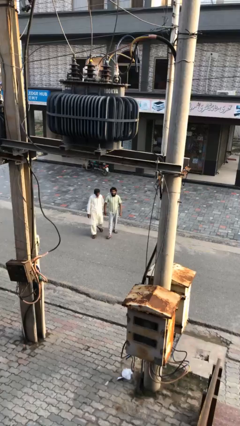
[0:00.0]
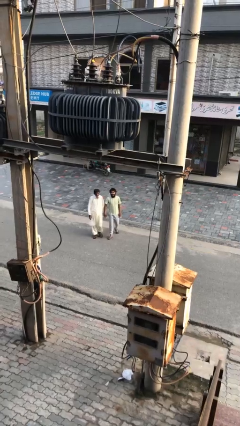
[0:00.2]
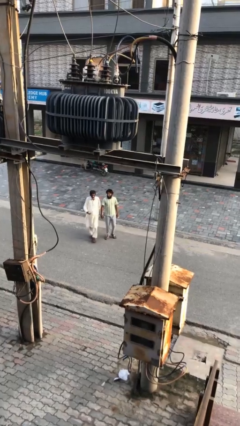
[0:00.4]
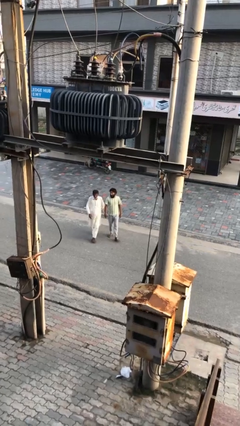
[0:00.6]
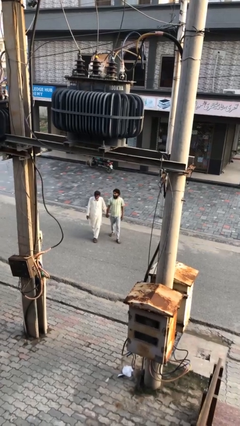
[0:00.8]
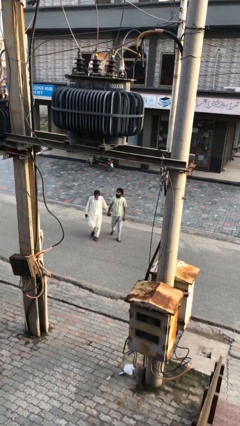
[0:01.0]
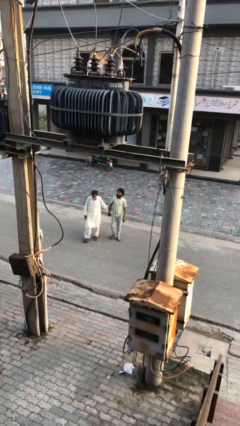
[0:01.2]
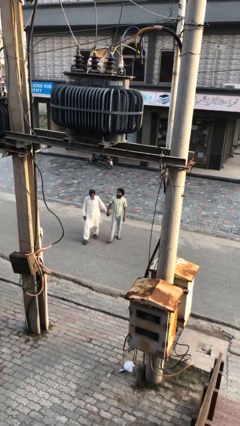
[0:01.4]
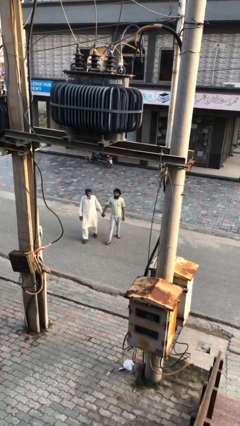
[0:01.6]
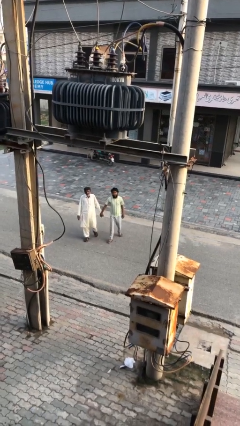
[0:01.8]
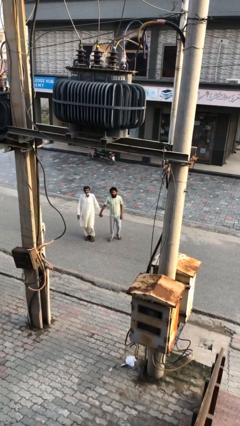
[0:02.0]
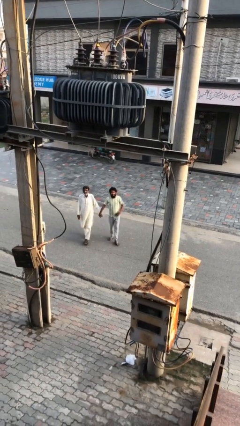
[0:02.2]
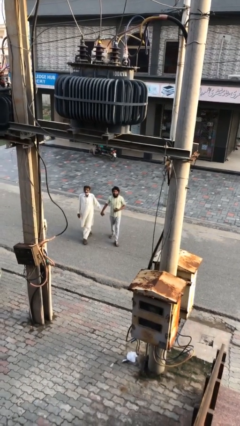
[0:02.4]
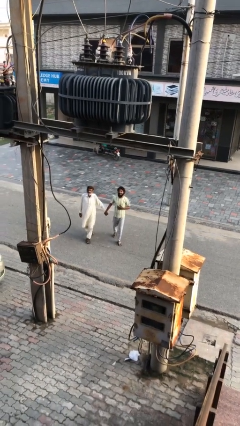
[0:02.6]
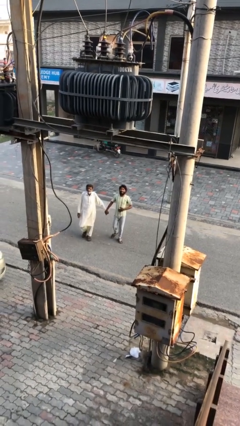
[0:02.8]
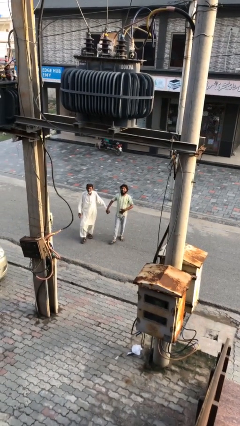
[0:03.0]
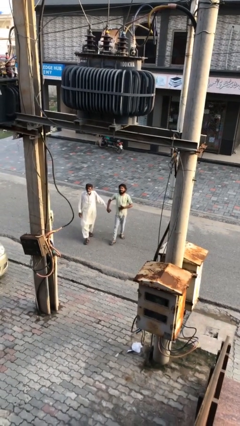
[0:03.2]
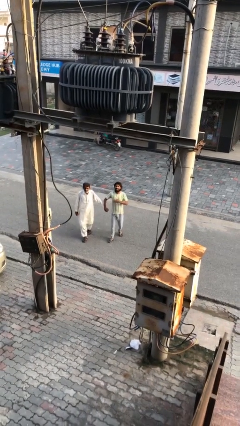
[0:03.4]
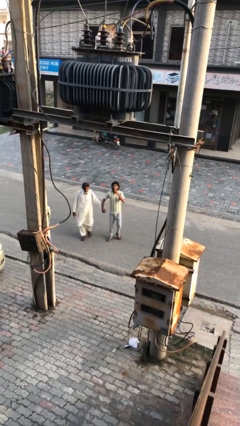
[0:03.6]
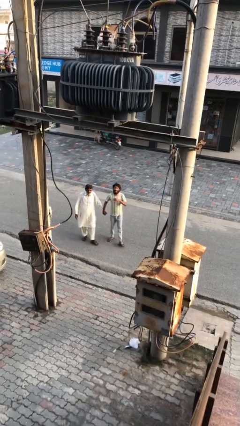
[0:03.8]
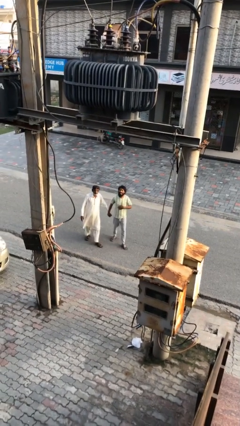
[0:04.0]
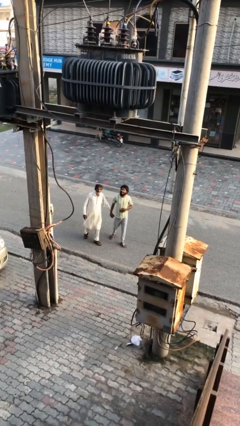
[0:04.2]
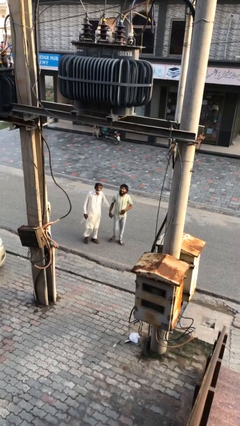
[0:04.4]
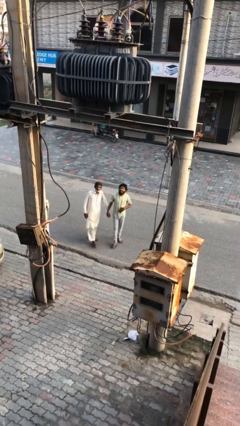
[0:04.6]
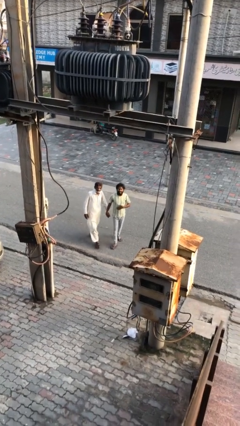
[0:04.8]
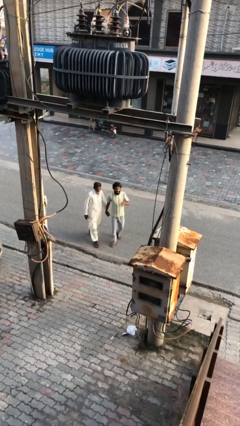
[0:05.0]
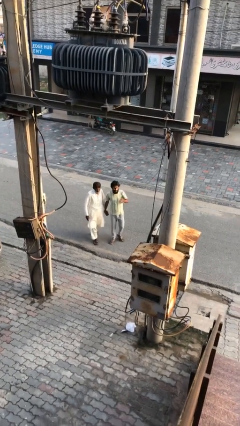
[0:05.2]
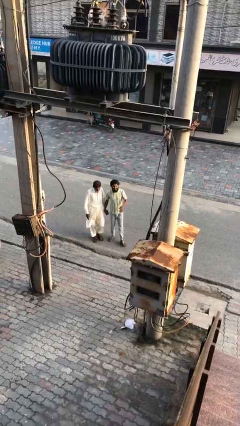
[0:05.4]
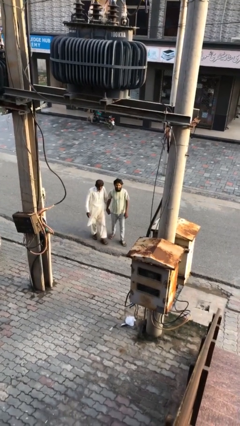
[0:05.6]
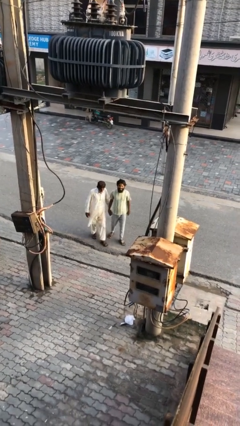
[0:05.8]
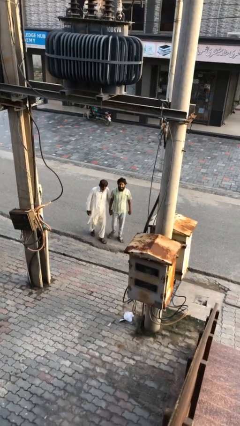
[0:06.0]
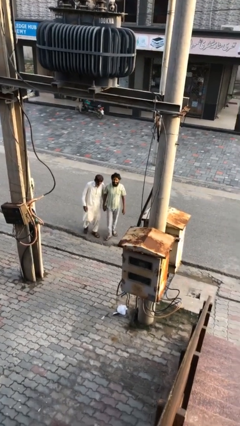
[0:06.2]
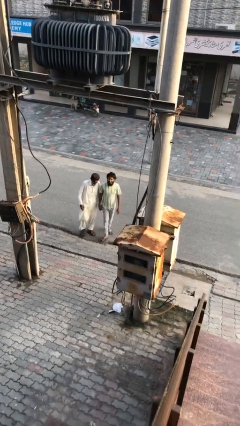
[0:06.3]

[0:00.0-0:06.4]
person holds hand

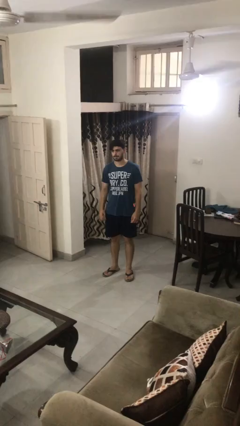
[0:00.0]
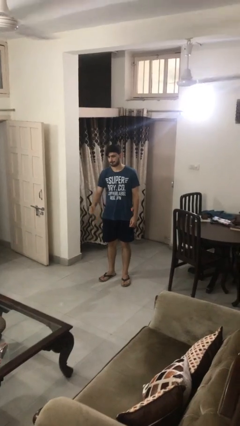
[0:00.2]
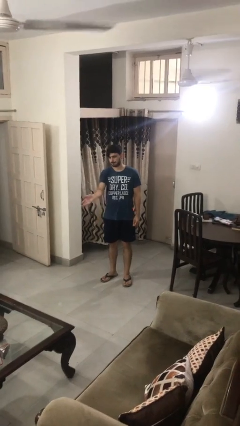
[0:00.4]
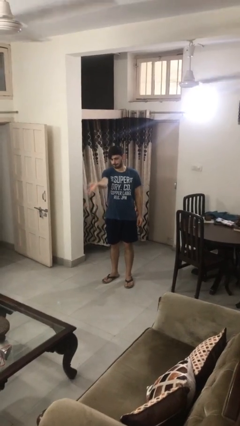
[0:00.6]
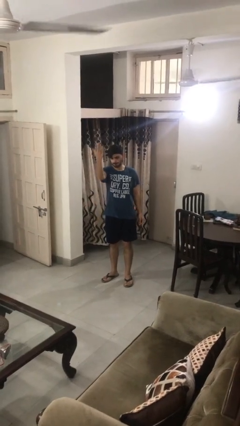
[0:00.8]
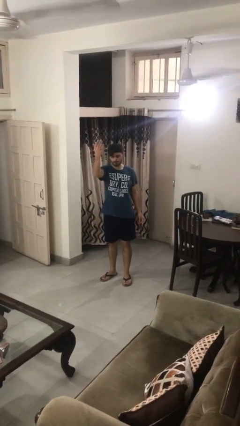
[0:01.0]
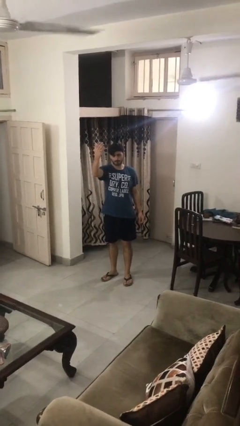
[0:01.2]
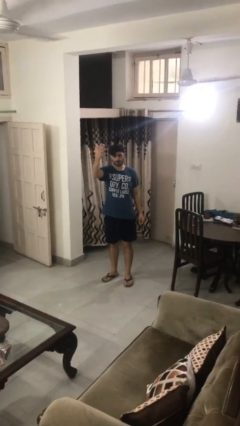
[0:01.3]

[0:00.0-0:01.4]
person gestures swipe up

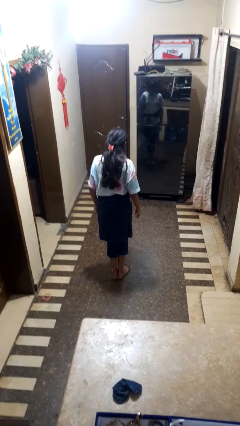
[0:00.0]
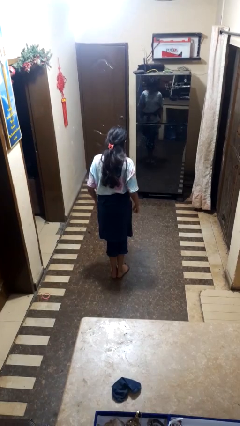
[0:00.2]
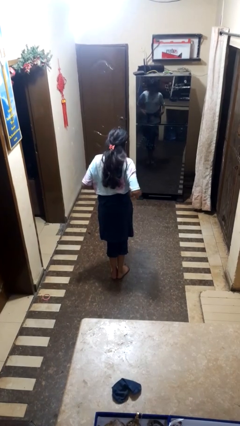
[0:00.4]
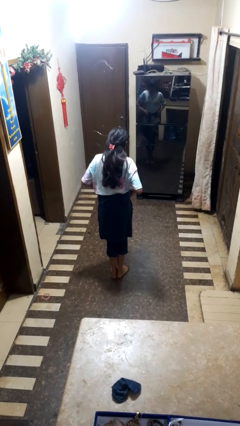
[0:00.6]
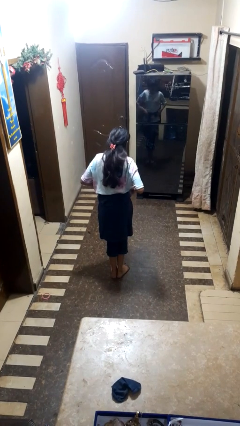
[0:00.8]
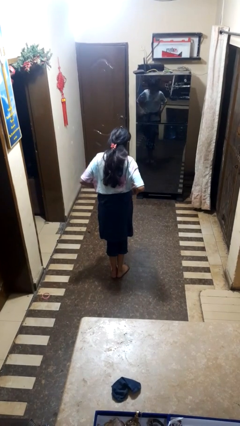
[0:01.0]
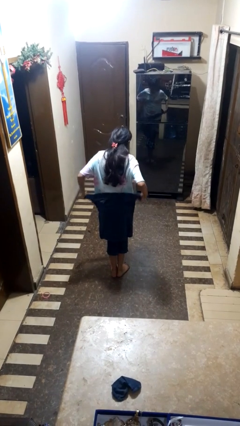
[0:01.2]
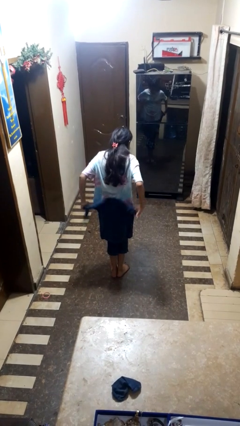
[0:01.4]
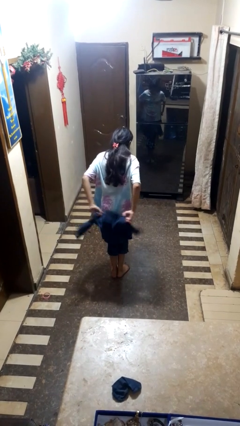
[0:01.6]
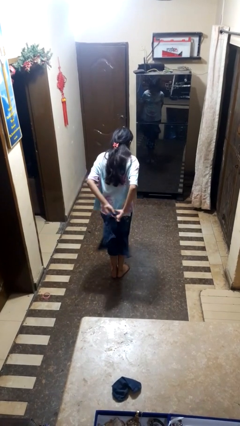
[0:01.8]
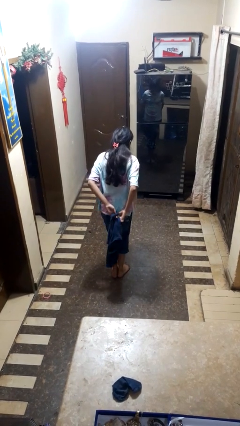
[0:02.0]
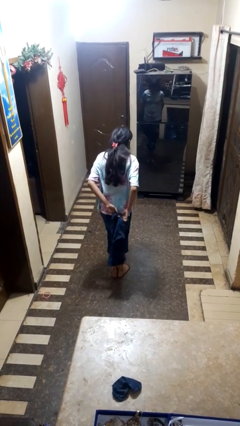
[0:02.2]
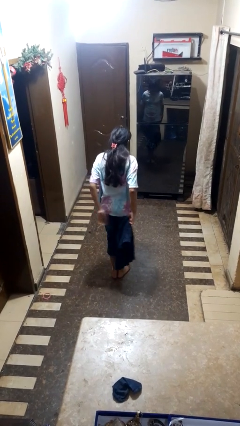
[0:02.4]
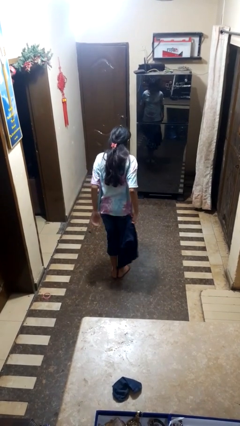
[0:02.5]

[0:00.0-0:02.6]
person unties jacket around waist

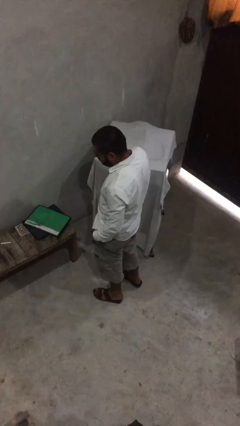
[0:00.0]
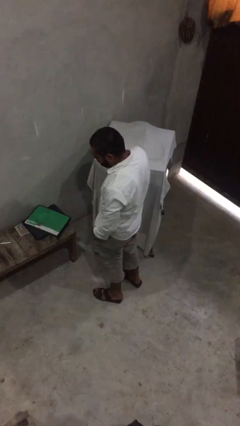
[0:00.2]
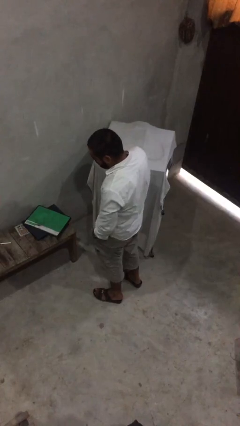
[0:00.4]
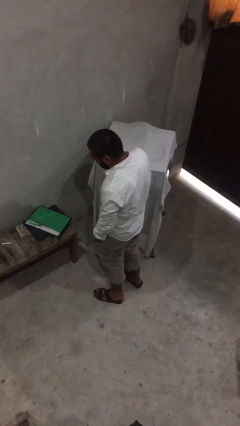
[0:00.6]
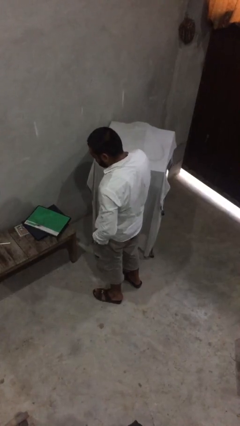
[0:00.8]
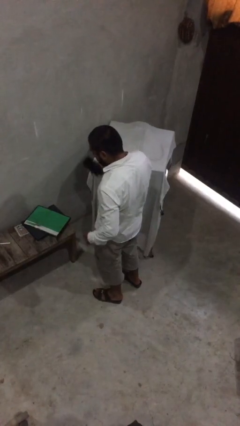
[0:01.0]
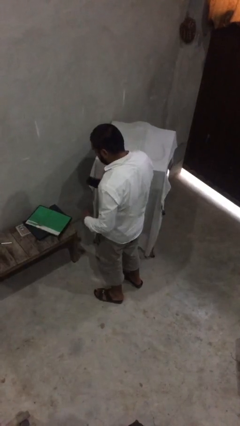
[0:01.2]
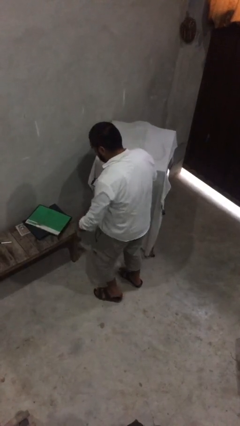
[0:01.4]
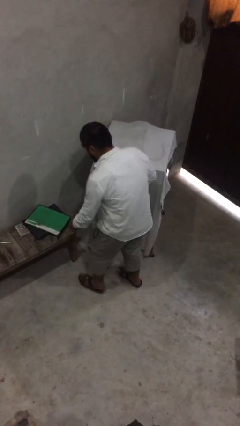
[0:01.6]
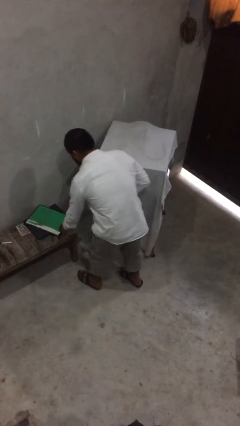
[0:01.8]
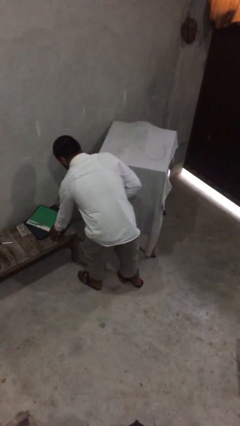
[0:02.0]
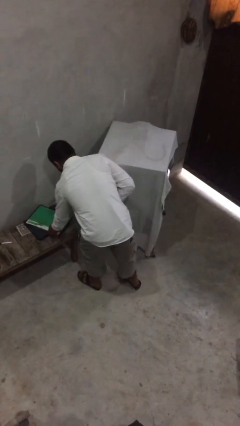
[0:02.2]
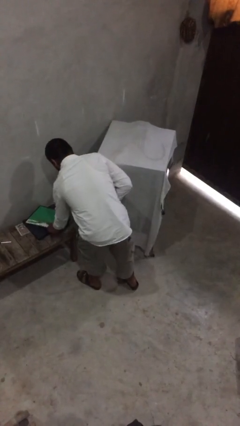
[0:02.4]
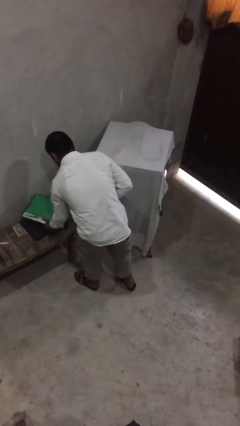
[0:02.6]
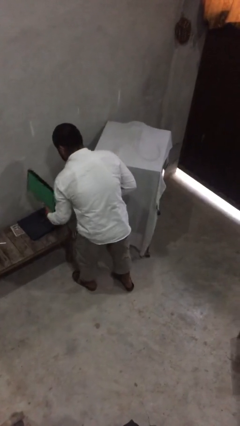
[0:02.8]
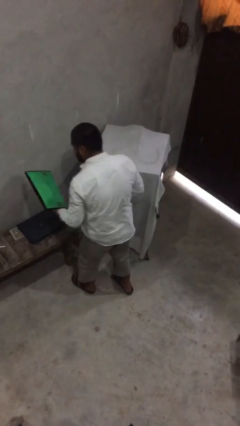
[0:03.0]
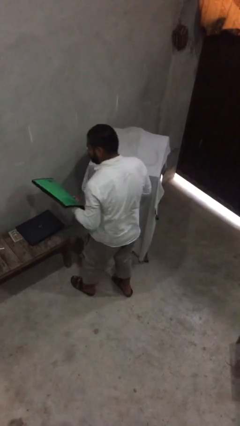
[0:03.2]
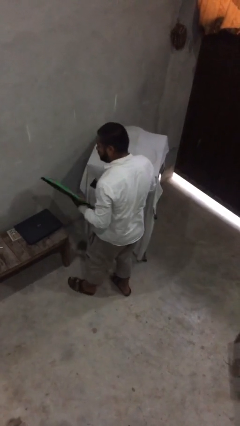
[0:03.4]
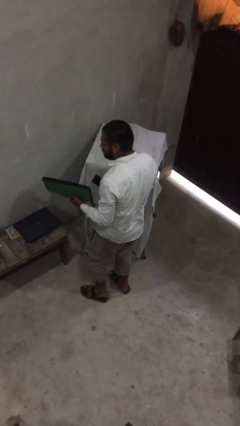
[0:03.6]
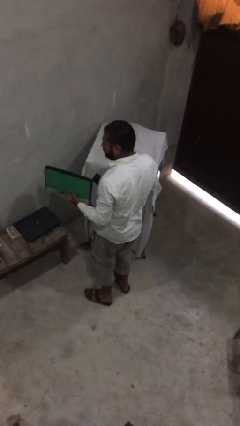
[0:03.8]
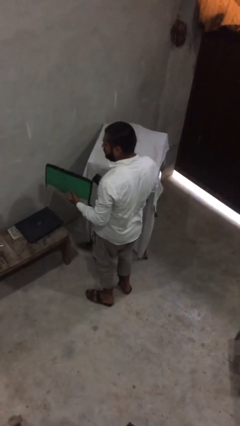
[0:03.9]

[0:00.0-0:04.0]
person picks up object from table

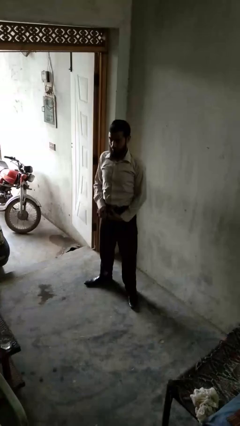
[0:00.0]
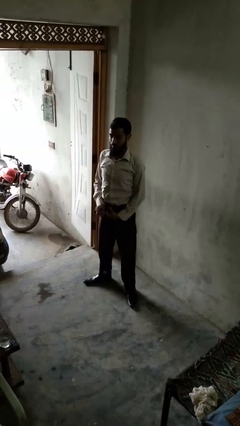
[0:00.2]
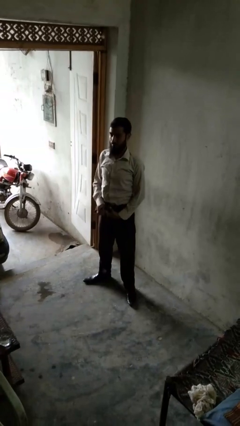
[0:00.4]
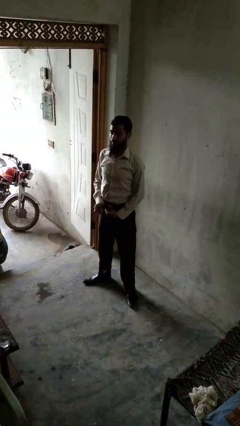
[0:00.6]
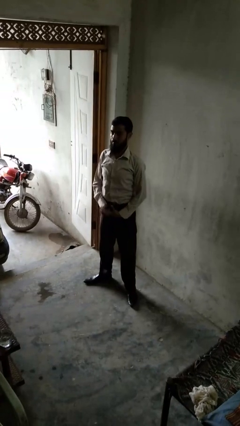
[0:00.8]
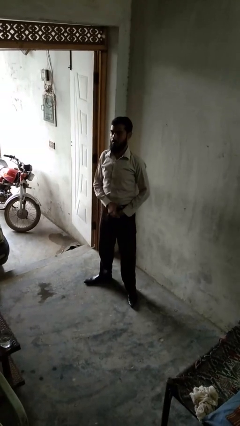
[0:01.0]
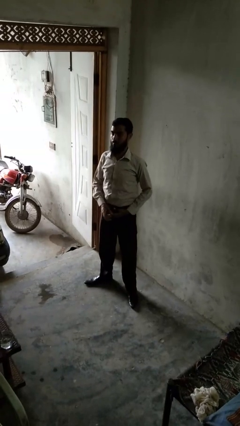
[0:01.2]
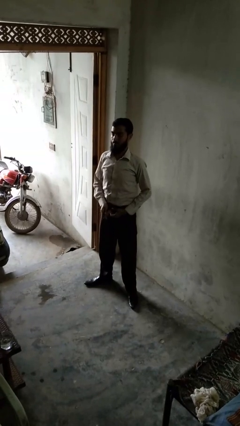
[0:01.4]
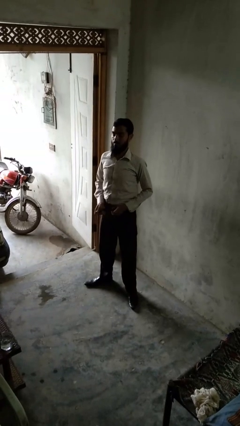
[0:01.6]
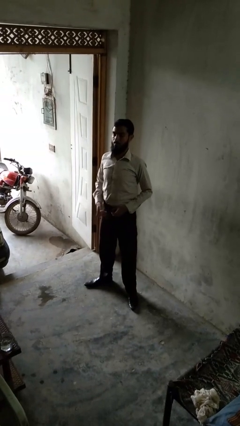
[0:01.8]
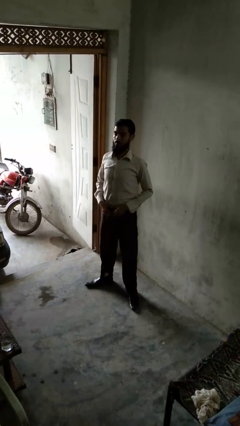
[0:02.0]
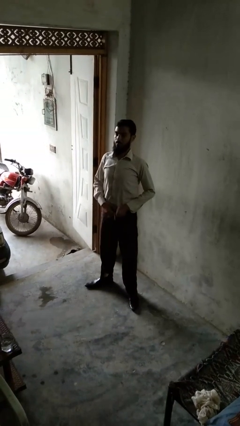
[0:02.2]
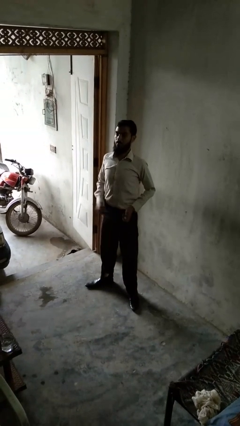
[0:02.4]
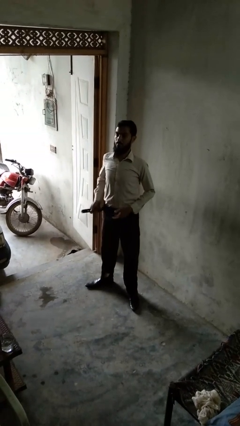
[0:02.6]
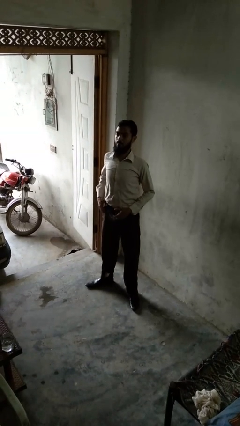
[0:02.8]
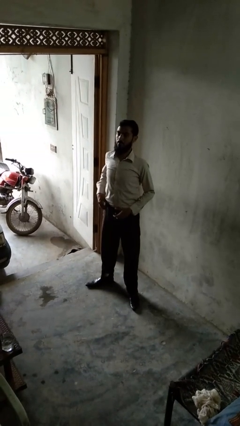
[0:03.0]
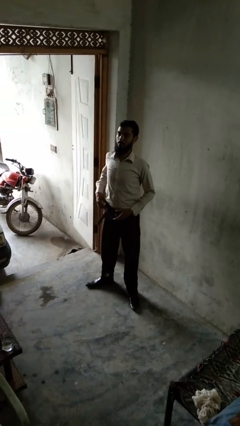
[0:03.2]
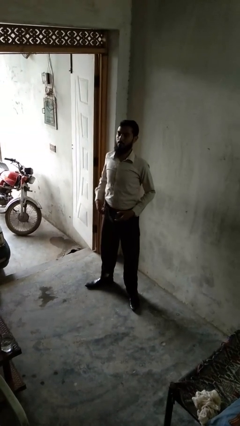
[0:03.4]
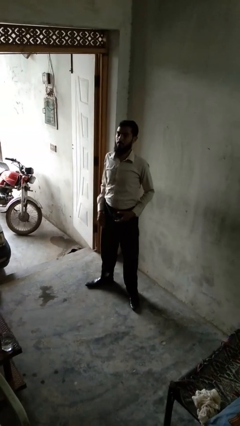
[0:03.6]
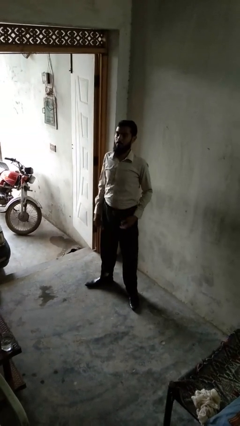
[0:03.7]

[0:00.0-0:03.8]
person takes off belt
